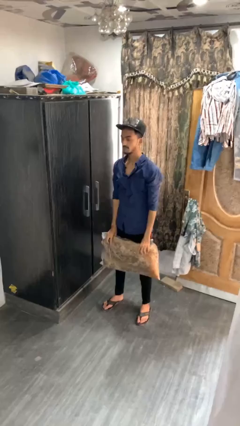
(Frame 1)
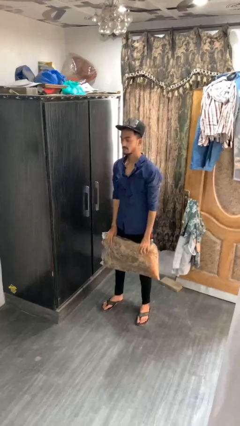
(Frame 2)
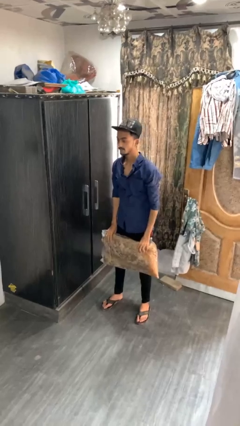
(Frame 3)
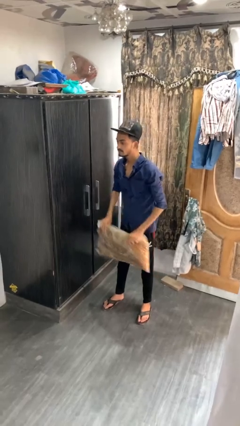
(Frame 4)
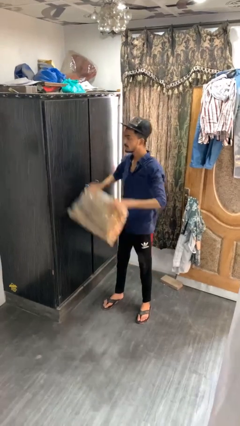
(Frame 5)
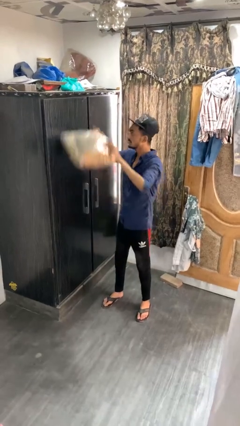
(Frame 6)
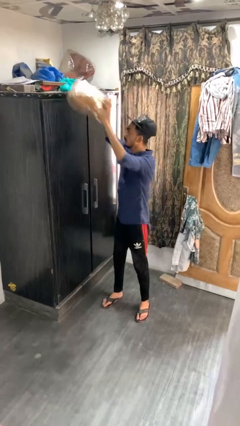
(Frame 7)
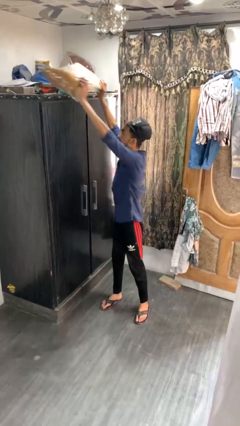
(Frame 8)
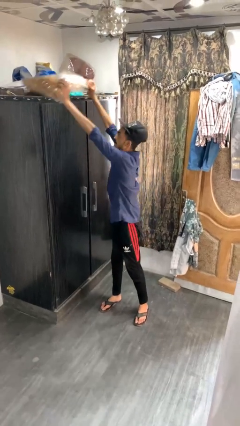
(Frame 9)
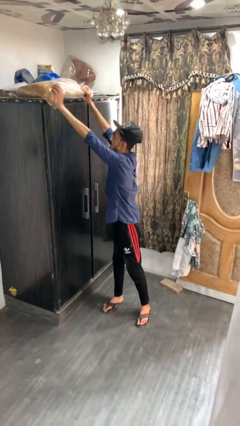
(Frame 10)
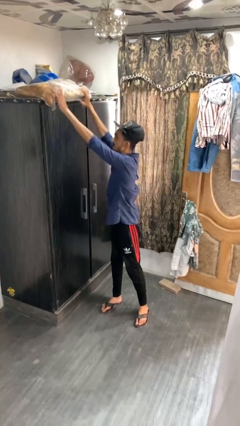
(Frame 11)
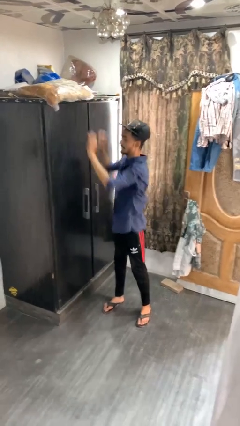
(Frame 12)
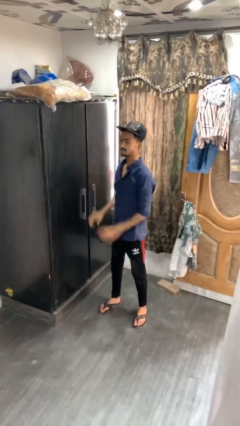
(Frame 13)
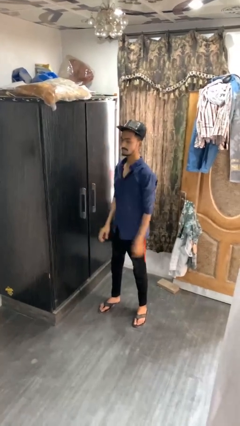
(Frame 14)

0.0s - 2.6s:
person puts down object on shelf

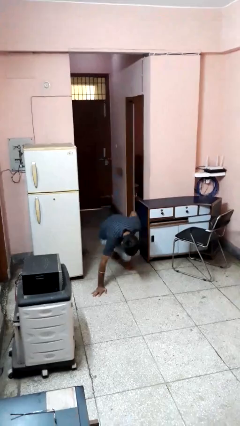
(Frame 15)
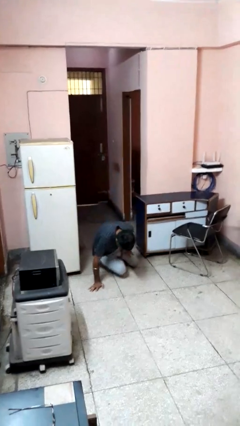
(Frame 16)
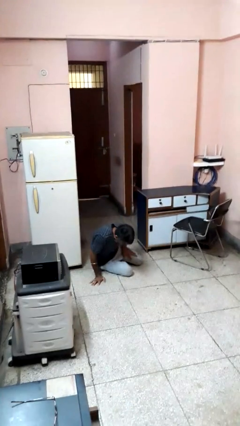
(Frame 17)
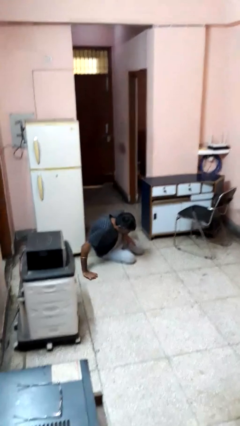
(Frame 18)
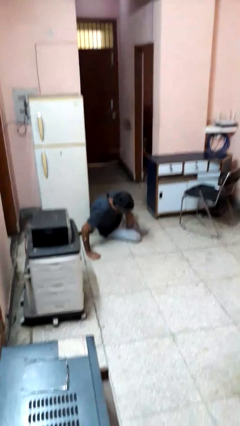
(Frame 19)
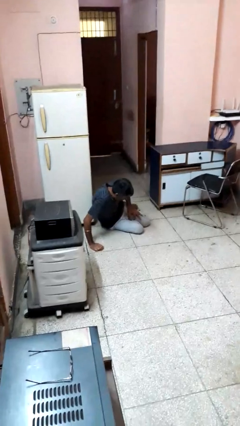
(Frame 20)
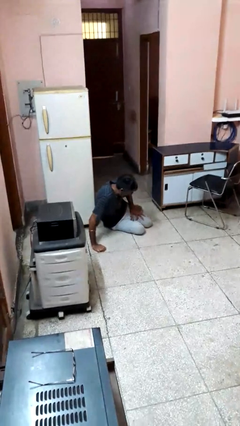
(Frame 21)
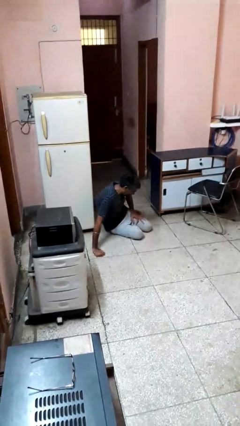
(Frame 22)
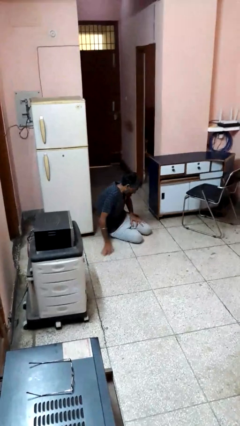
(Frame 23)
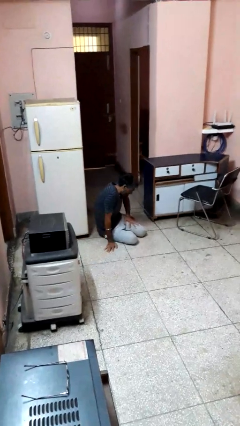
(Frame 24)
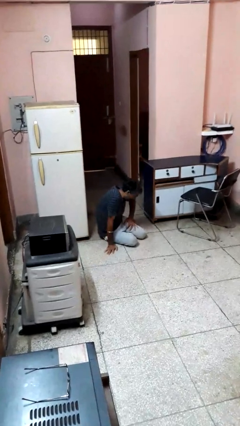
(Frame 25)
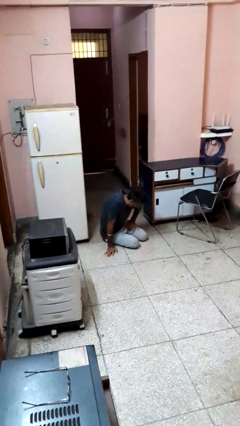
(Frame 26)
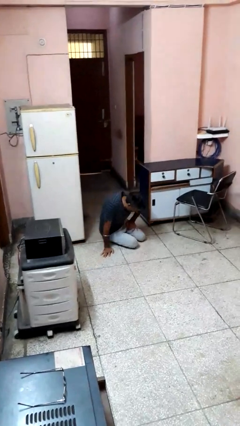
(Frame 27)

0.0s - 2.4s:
person lies down on floor

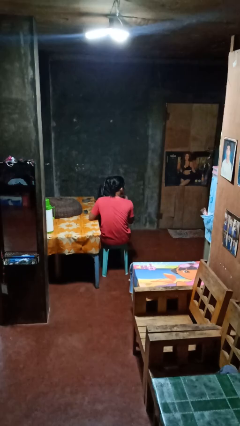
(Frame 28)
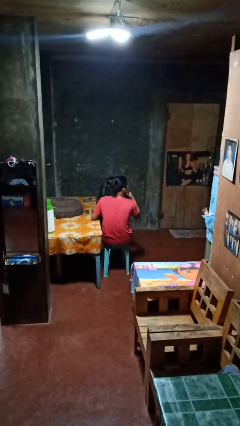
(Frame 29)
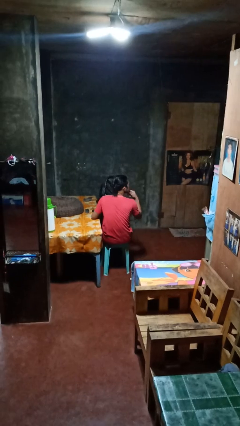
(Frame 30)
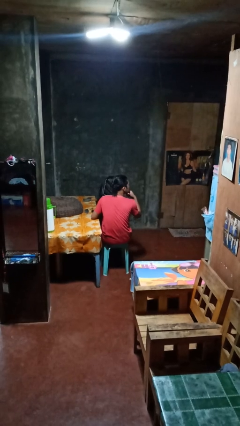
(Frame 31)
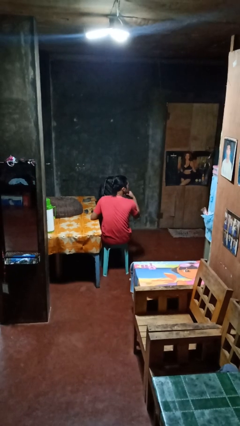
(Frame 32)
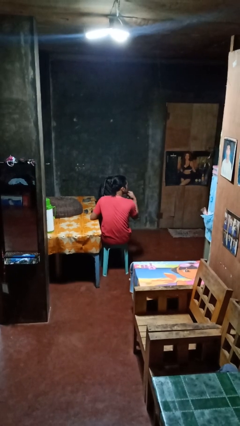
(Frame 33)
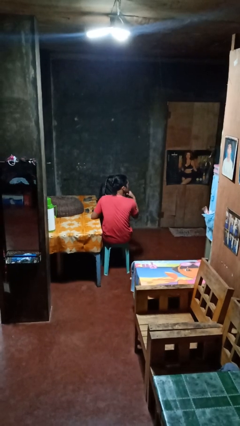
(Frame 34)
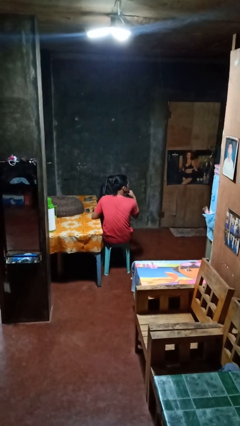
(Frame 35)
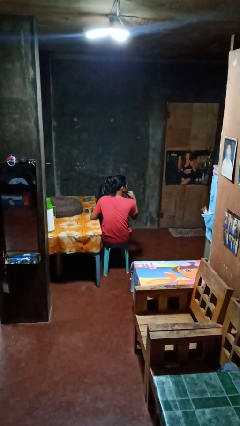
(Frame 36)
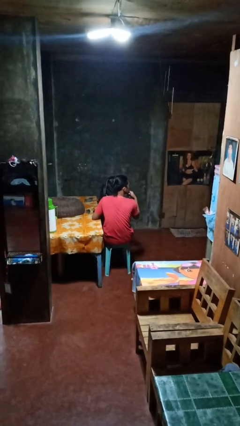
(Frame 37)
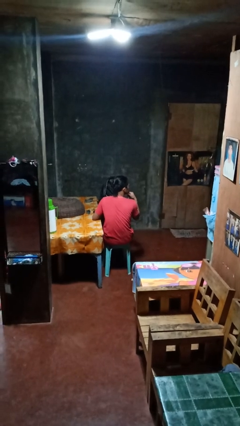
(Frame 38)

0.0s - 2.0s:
person strokes chin

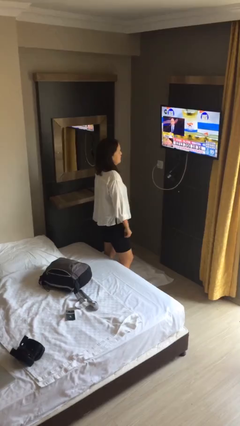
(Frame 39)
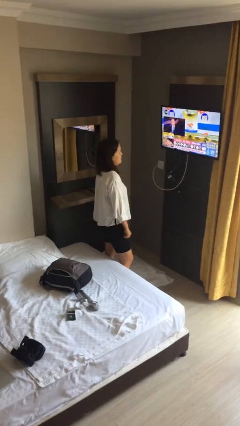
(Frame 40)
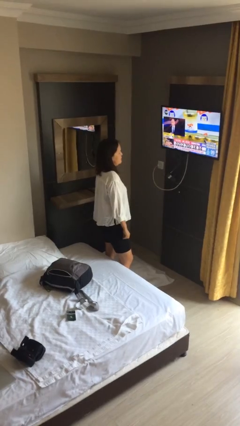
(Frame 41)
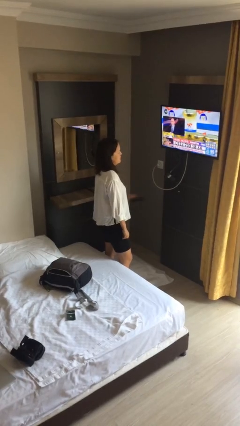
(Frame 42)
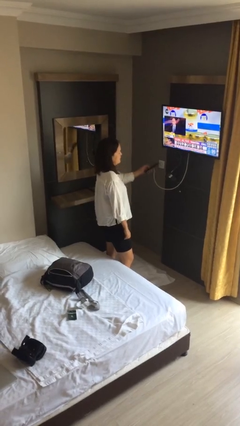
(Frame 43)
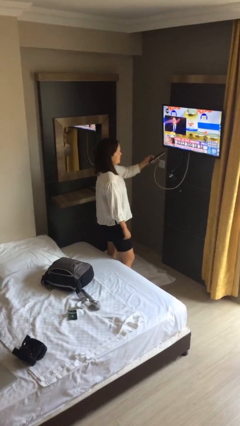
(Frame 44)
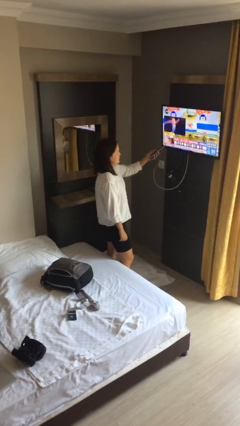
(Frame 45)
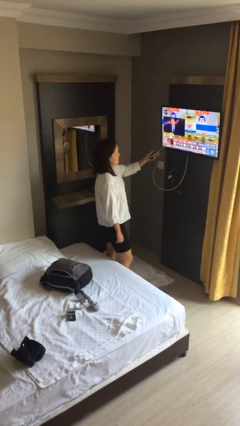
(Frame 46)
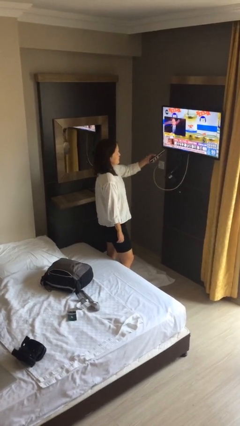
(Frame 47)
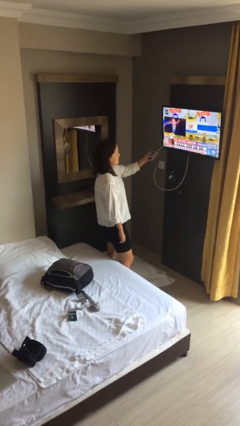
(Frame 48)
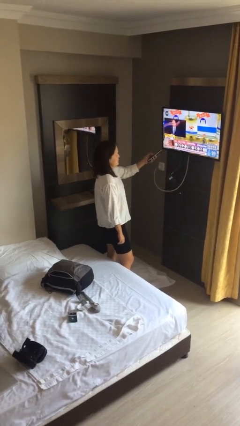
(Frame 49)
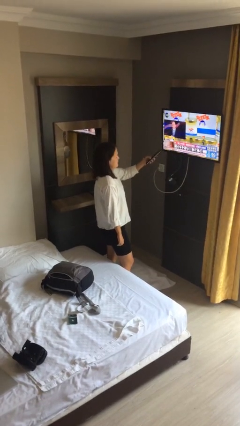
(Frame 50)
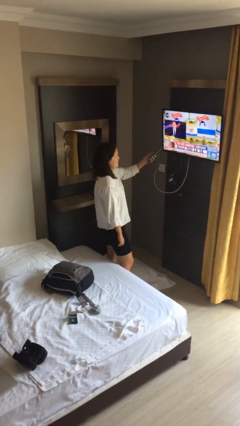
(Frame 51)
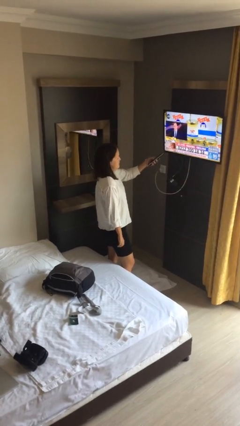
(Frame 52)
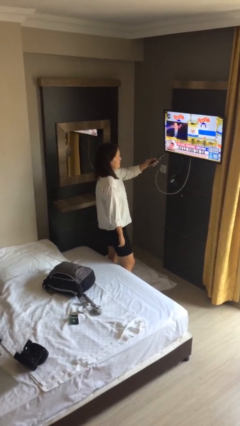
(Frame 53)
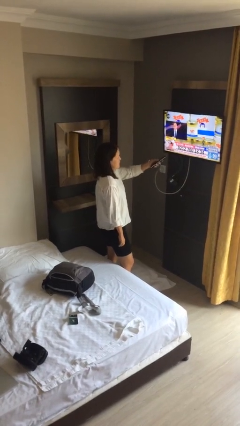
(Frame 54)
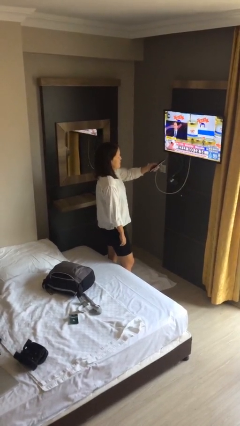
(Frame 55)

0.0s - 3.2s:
person uses television remote

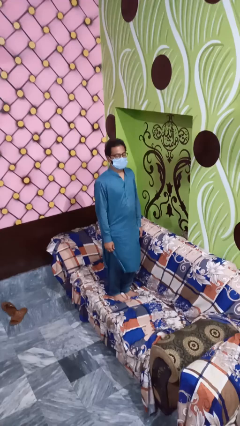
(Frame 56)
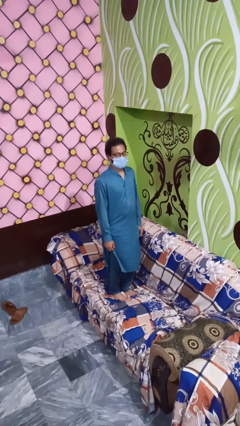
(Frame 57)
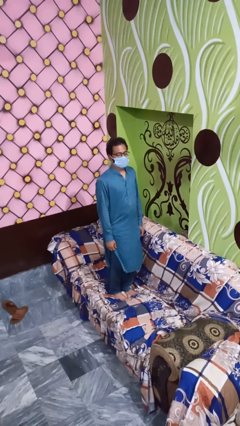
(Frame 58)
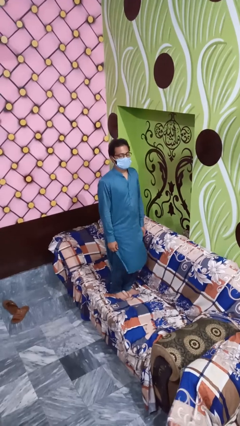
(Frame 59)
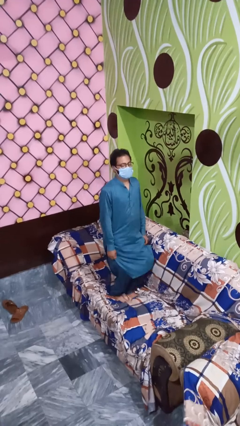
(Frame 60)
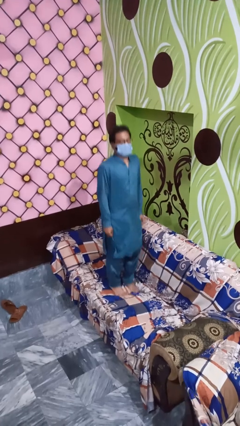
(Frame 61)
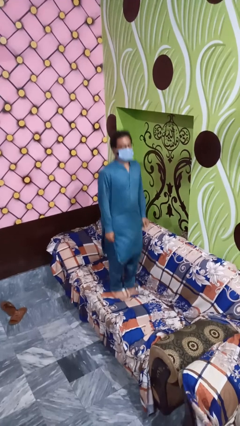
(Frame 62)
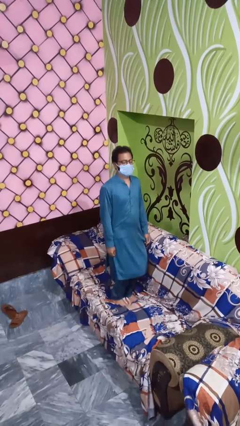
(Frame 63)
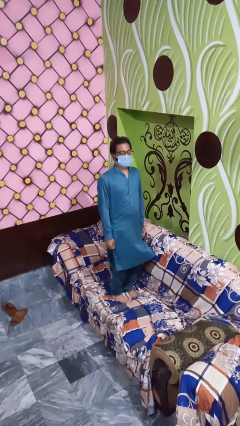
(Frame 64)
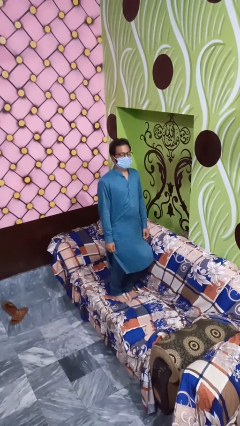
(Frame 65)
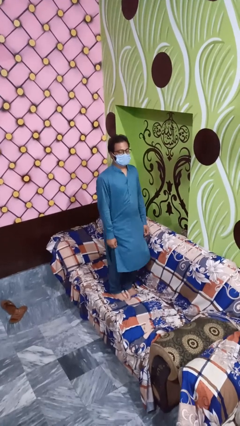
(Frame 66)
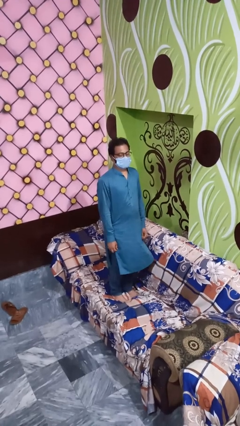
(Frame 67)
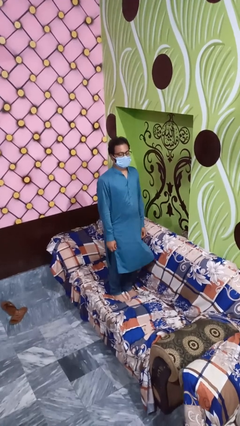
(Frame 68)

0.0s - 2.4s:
person jumps on couch

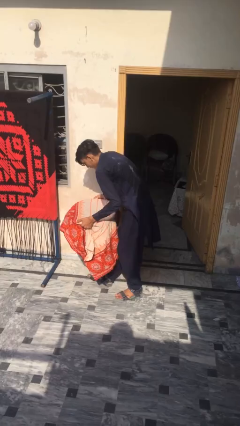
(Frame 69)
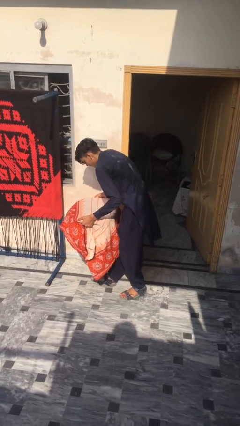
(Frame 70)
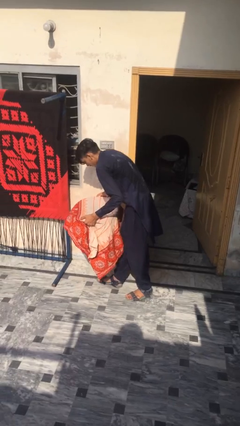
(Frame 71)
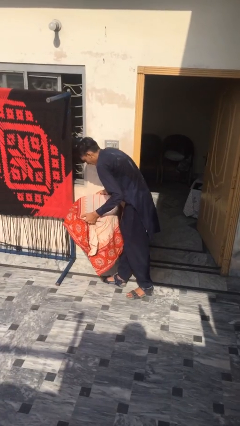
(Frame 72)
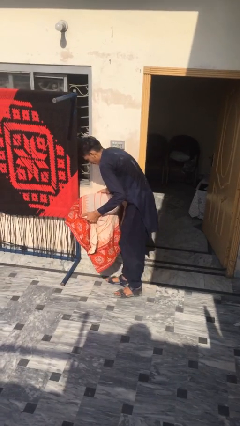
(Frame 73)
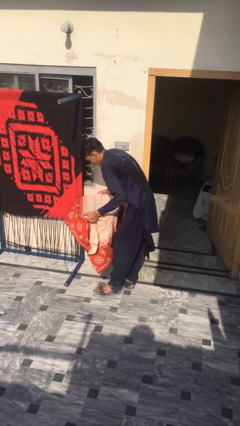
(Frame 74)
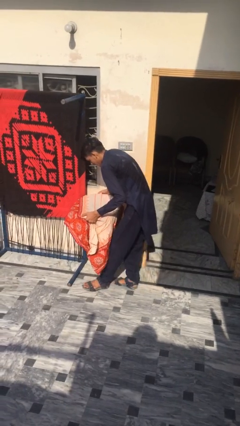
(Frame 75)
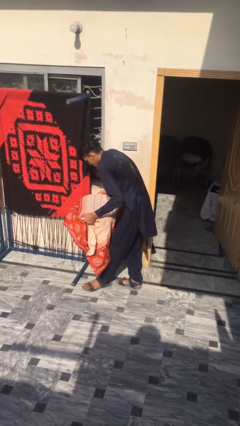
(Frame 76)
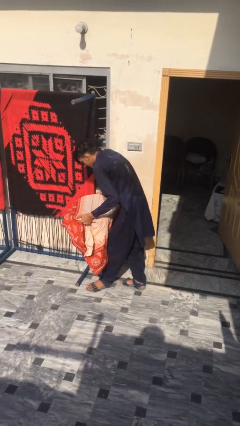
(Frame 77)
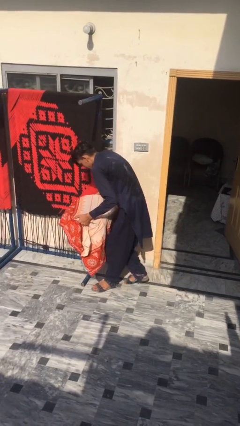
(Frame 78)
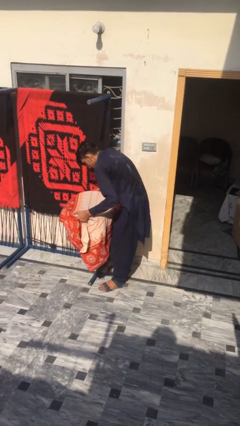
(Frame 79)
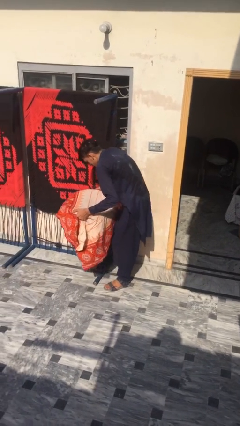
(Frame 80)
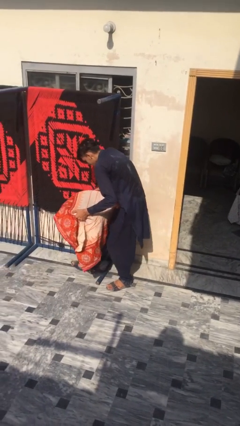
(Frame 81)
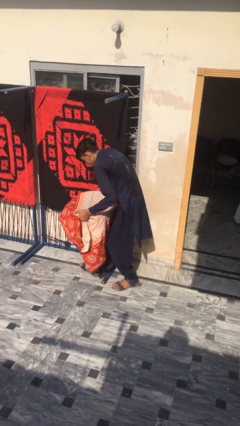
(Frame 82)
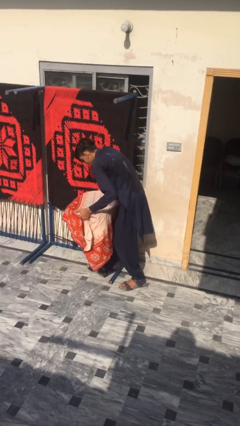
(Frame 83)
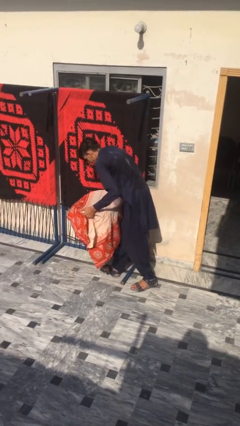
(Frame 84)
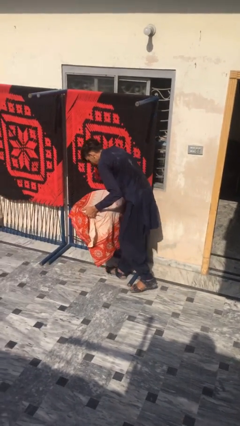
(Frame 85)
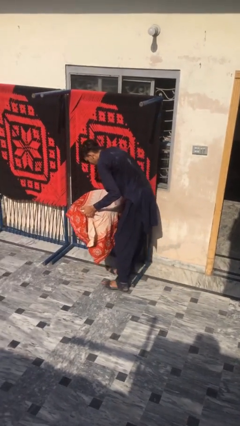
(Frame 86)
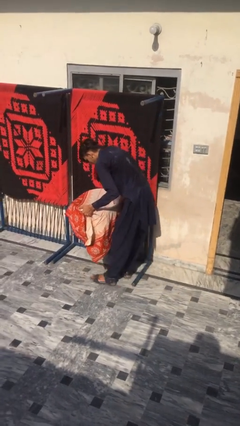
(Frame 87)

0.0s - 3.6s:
person carries heavy object

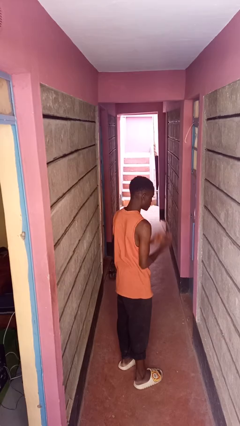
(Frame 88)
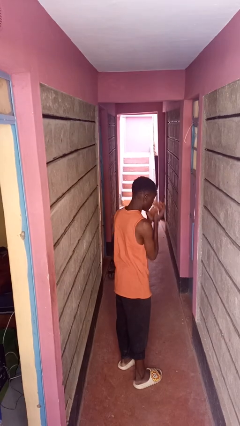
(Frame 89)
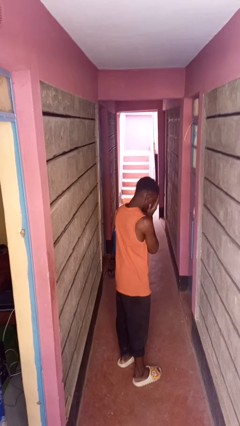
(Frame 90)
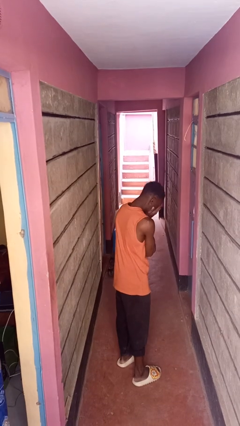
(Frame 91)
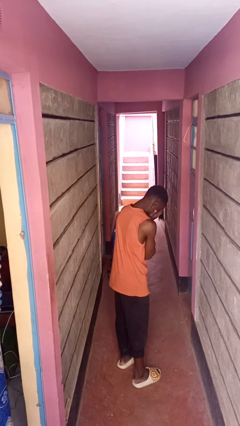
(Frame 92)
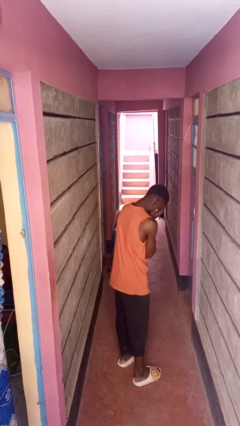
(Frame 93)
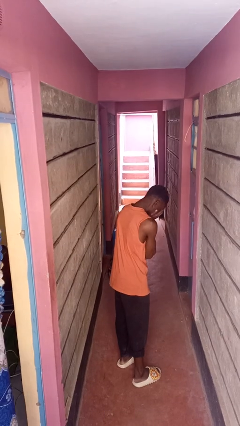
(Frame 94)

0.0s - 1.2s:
person sneezes into hand
